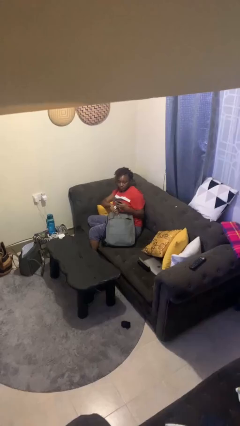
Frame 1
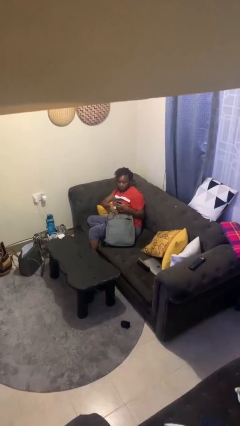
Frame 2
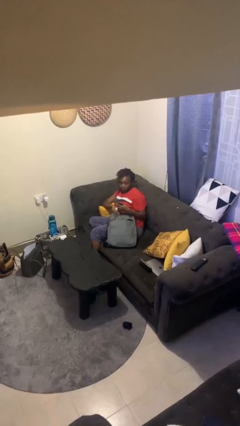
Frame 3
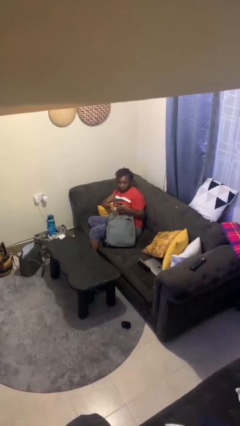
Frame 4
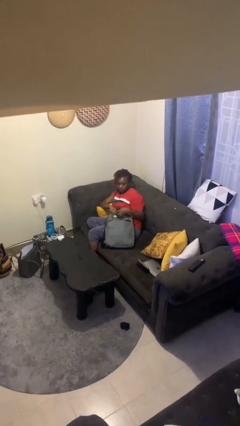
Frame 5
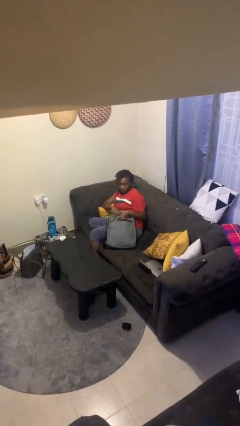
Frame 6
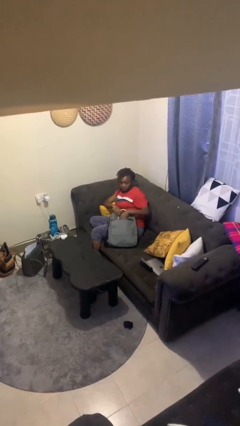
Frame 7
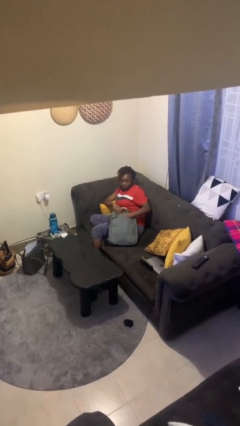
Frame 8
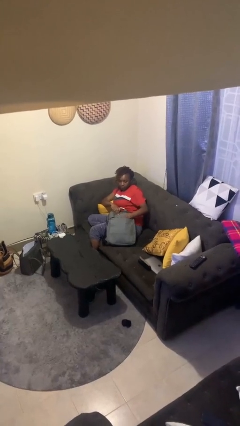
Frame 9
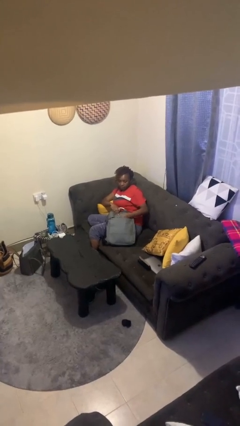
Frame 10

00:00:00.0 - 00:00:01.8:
person puts object into backpack

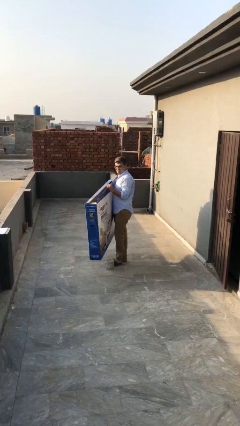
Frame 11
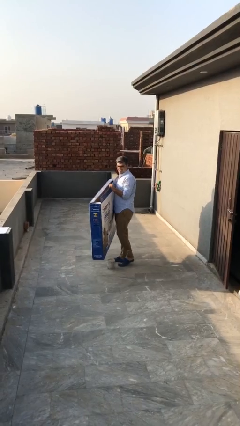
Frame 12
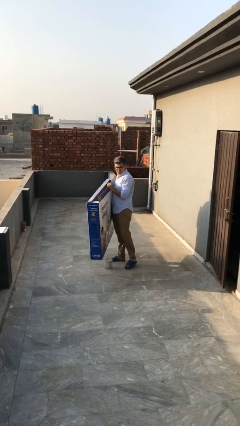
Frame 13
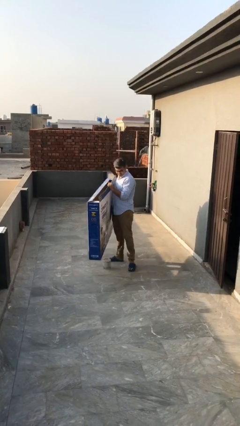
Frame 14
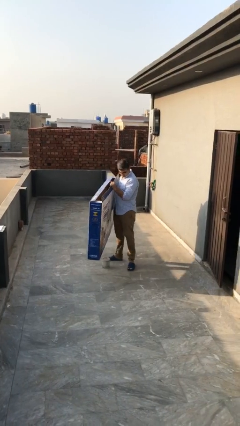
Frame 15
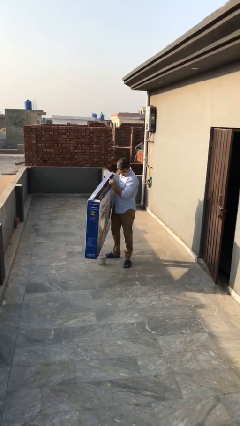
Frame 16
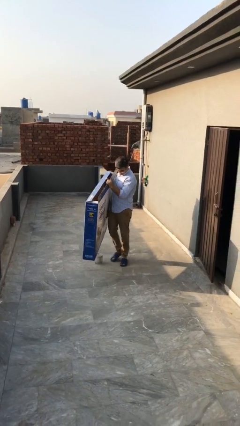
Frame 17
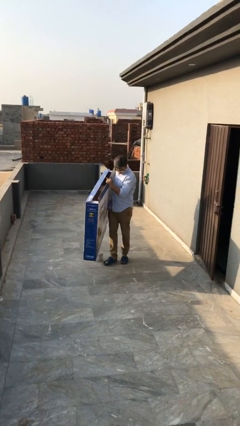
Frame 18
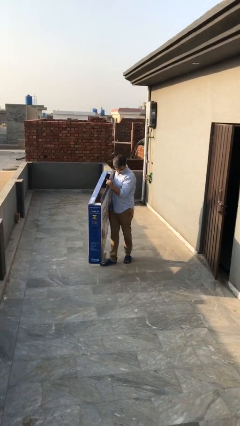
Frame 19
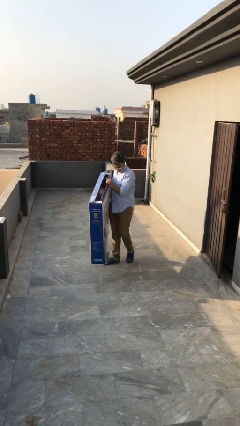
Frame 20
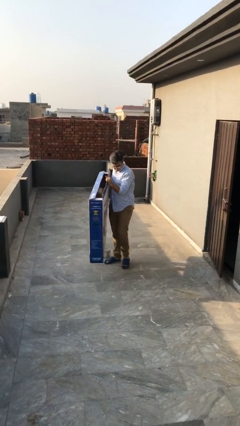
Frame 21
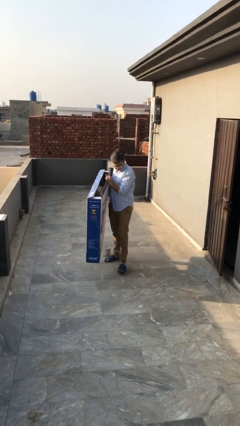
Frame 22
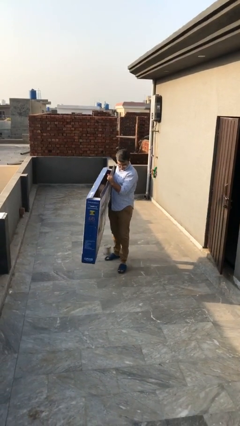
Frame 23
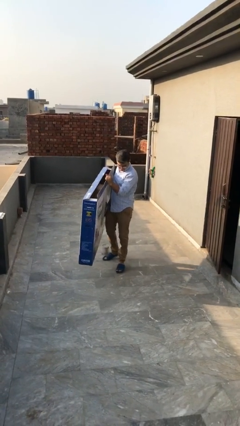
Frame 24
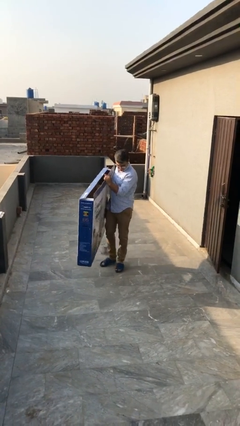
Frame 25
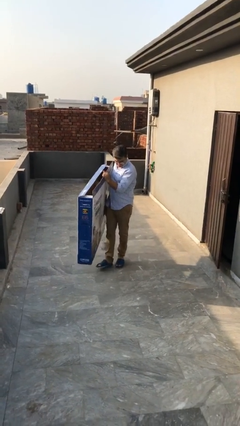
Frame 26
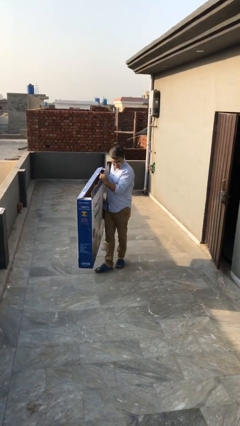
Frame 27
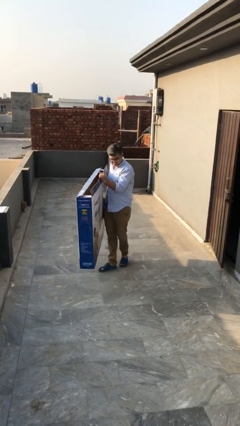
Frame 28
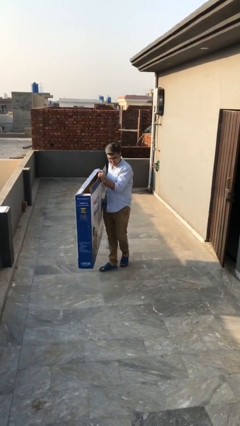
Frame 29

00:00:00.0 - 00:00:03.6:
person carries heavy object

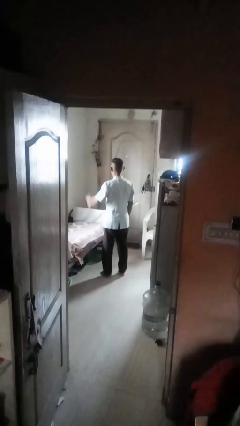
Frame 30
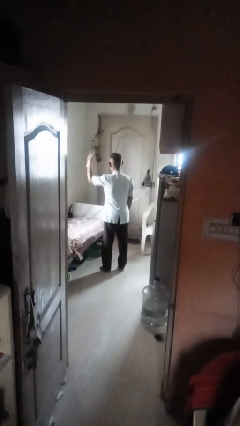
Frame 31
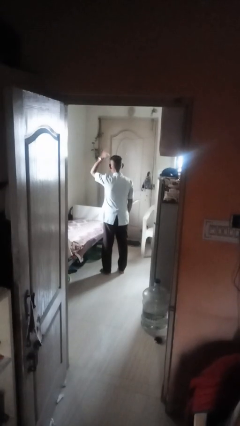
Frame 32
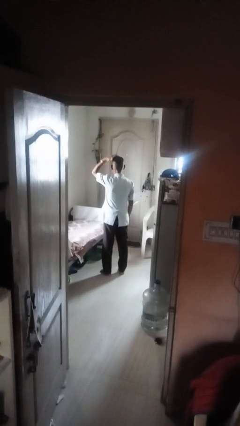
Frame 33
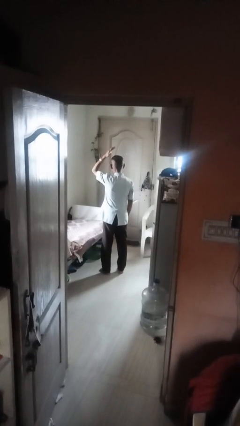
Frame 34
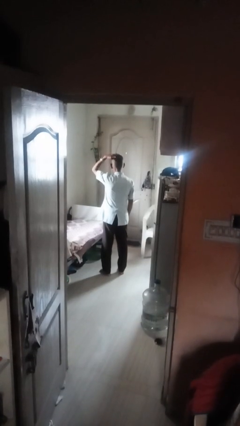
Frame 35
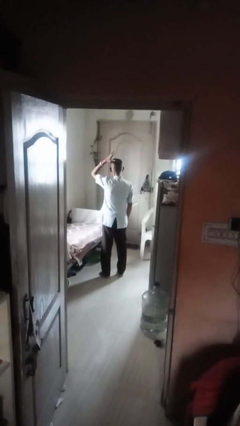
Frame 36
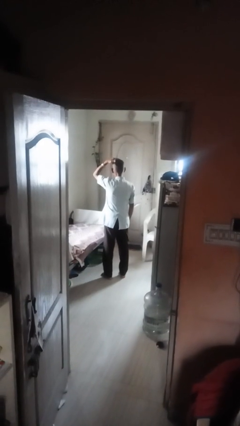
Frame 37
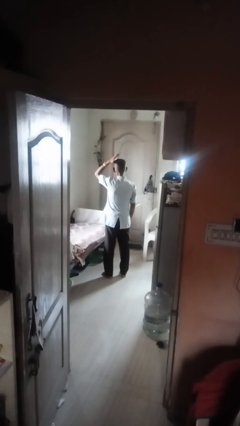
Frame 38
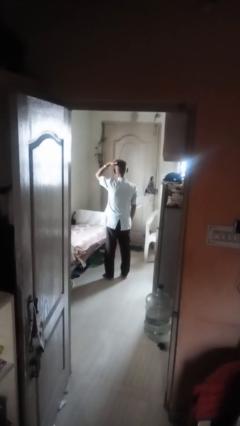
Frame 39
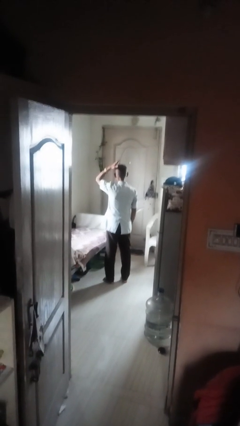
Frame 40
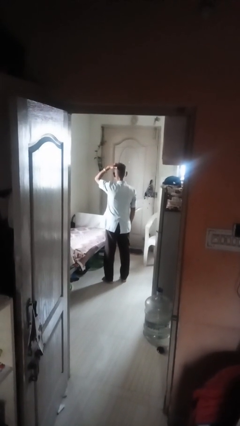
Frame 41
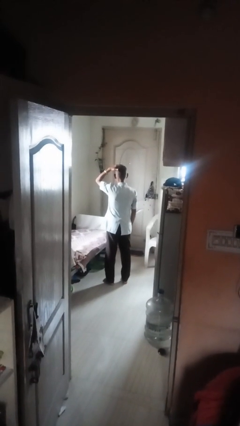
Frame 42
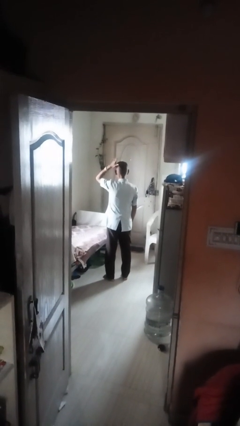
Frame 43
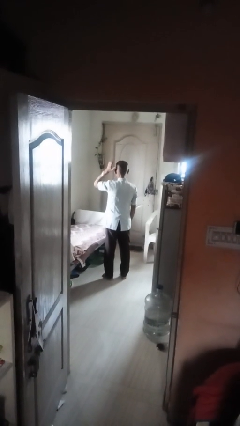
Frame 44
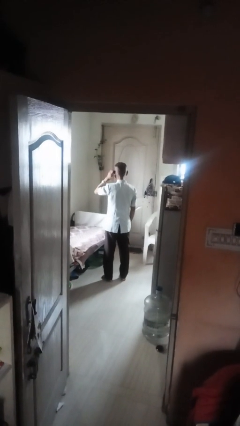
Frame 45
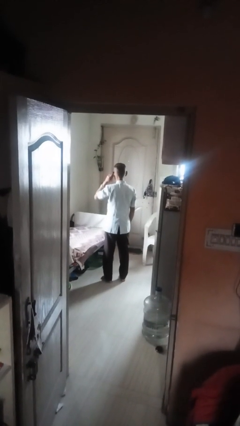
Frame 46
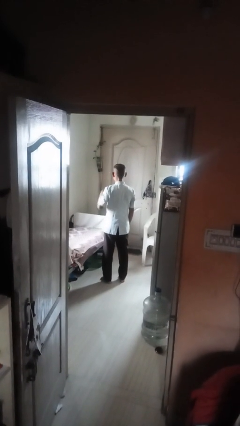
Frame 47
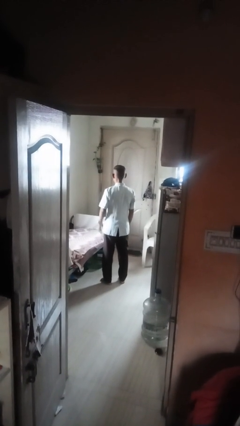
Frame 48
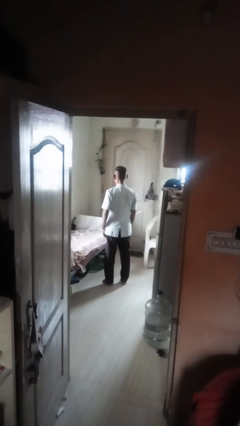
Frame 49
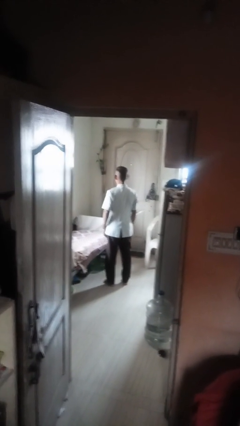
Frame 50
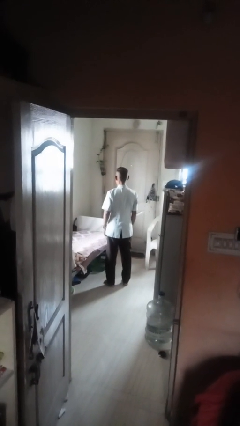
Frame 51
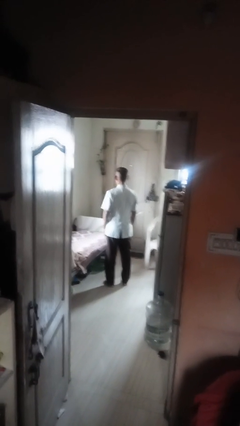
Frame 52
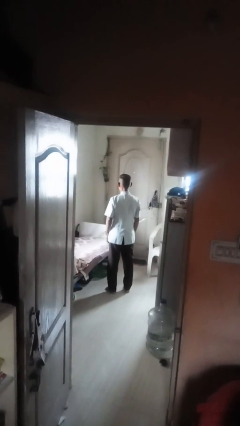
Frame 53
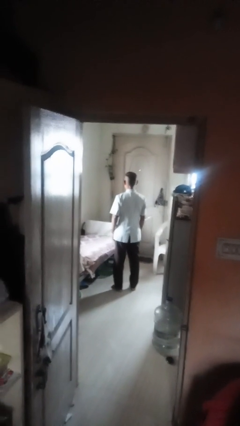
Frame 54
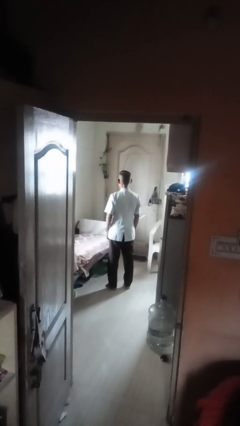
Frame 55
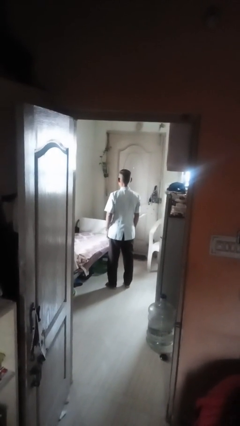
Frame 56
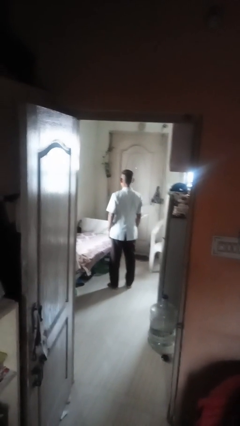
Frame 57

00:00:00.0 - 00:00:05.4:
person pats head

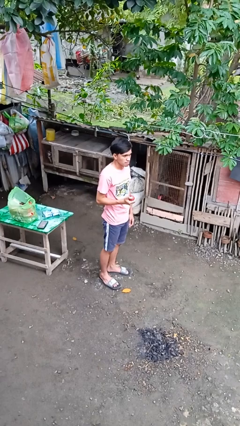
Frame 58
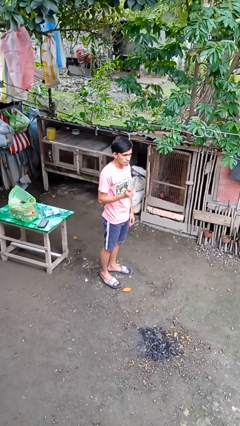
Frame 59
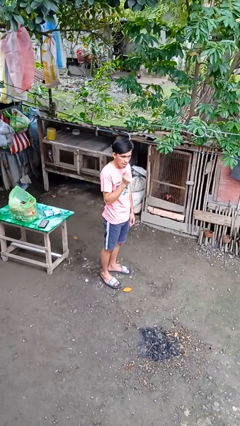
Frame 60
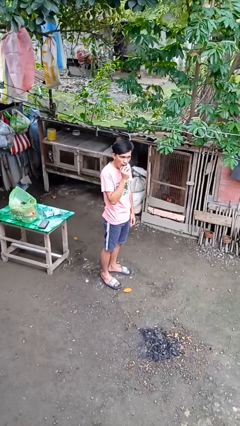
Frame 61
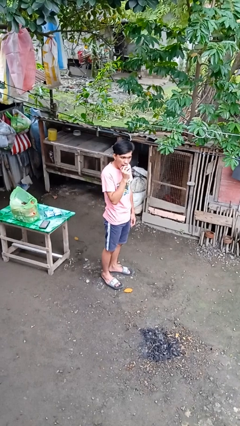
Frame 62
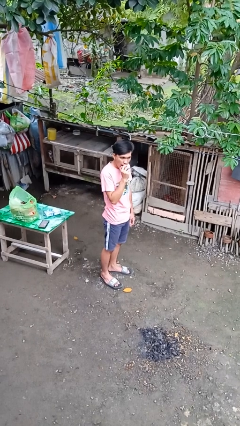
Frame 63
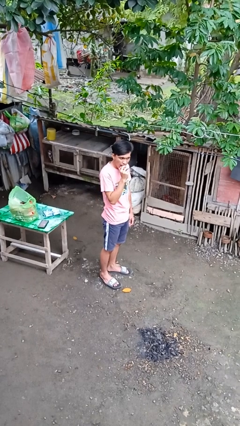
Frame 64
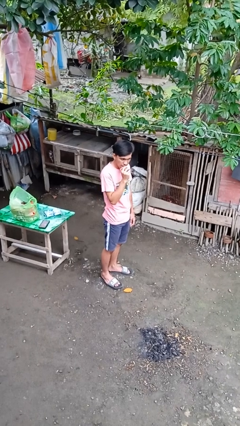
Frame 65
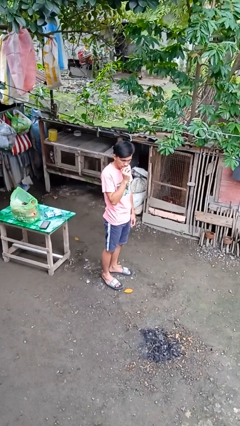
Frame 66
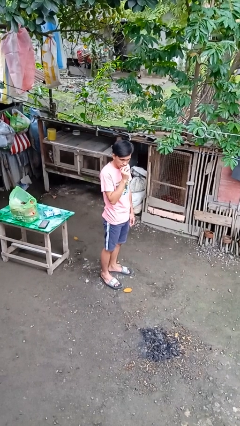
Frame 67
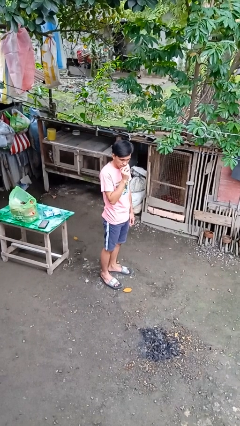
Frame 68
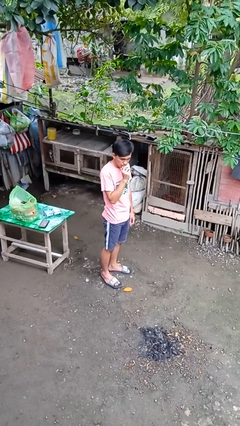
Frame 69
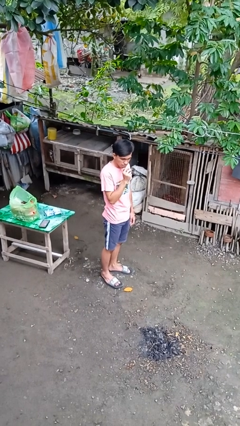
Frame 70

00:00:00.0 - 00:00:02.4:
person eats apple

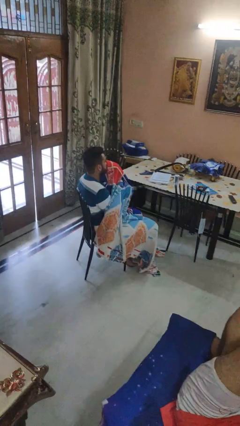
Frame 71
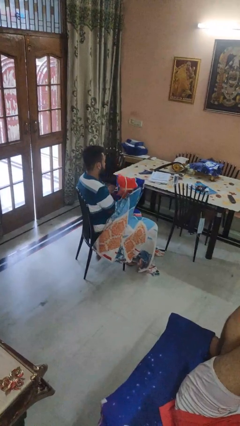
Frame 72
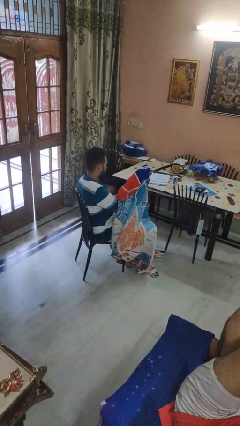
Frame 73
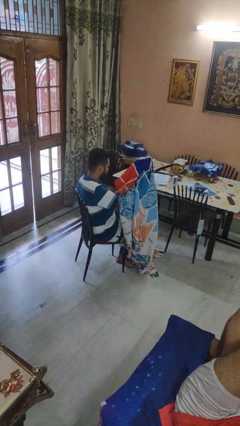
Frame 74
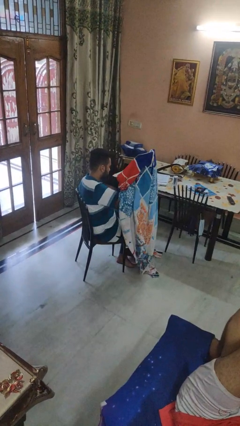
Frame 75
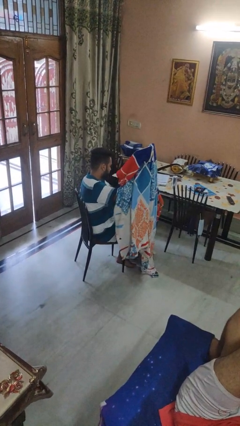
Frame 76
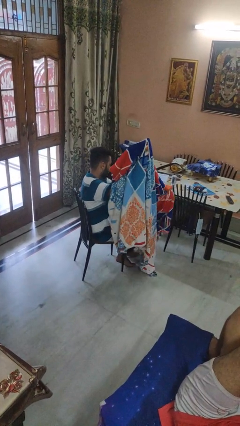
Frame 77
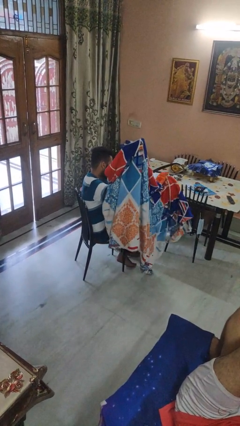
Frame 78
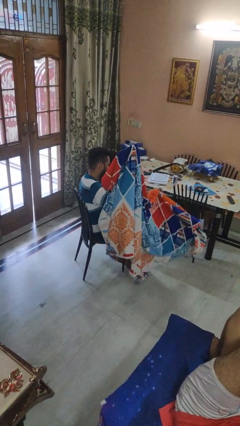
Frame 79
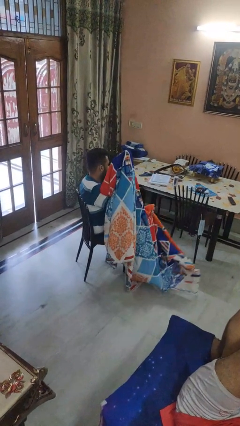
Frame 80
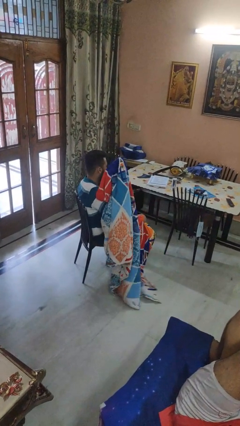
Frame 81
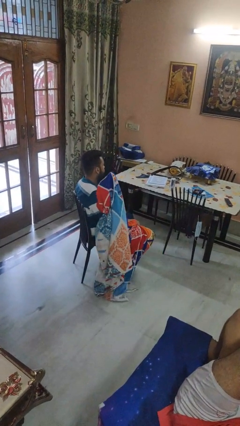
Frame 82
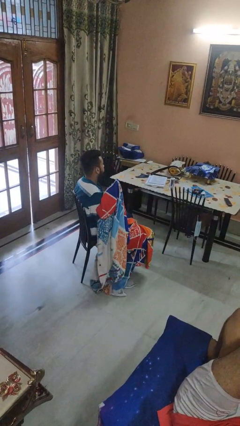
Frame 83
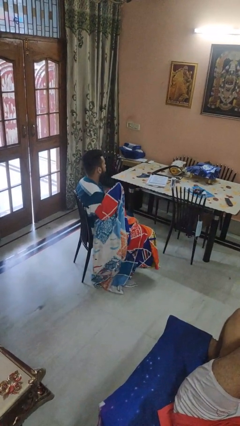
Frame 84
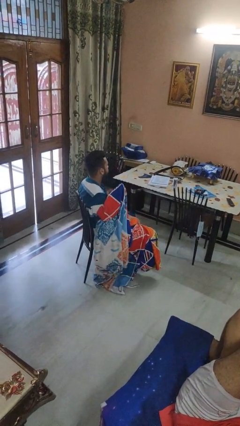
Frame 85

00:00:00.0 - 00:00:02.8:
person uncovers with blanket

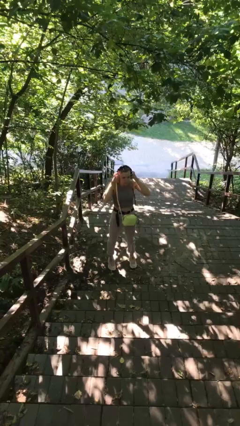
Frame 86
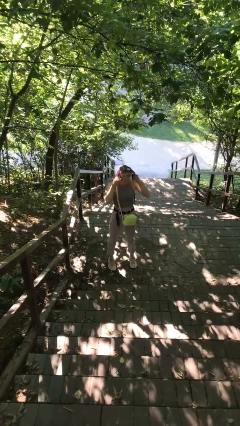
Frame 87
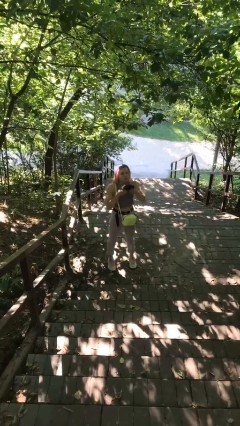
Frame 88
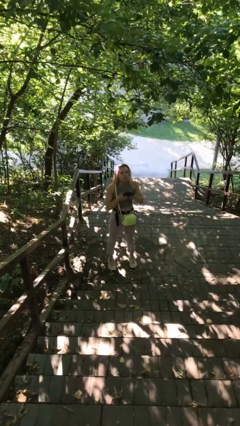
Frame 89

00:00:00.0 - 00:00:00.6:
person takes off headphones

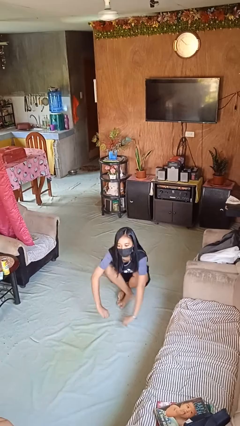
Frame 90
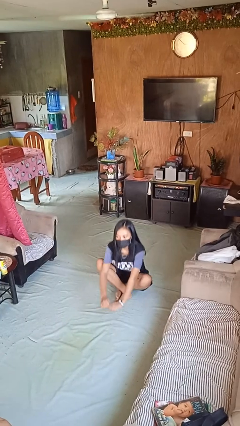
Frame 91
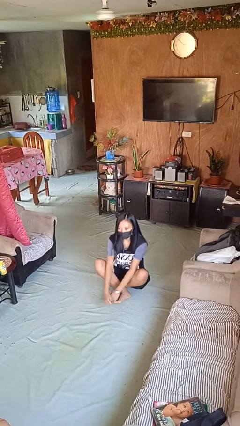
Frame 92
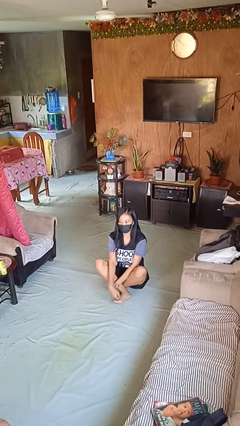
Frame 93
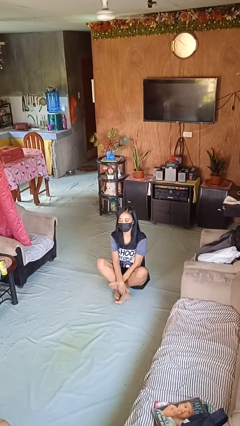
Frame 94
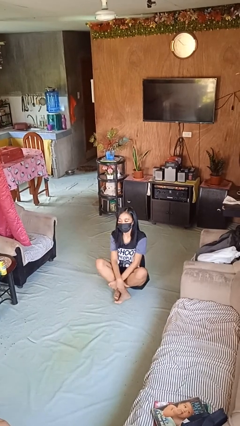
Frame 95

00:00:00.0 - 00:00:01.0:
person sits crisscross
